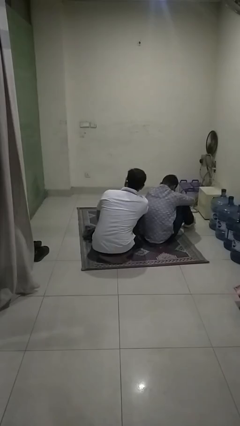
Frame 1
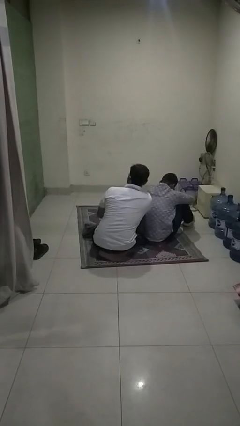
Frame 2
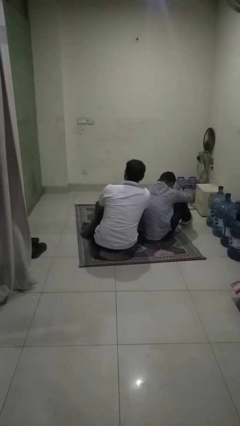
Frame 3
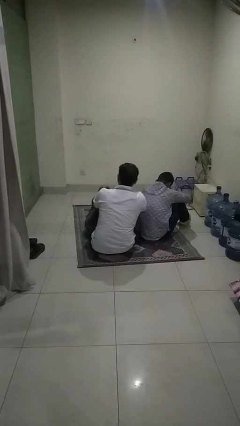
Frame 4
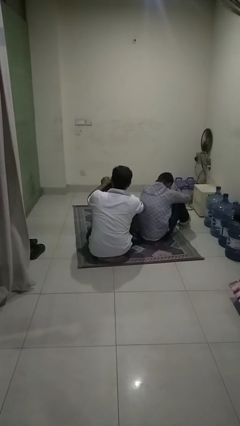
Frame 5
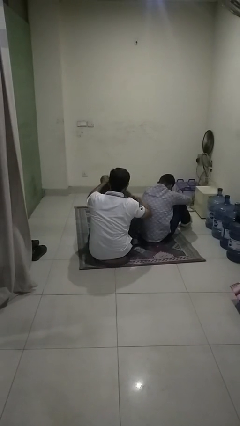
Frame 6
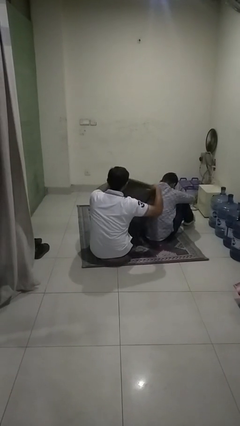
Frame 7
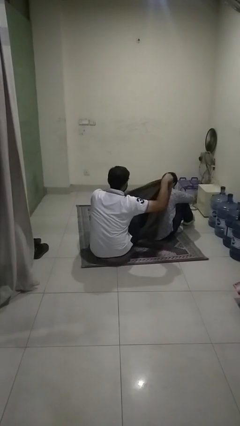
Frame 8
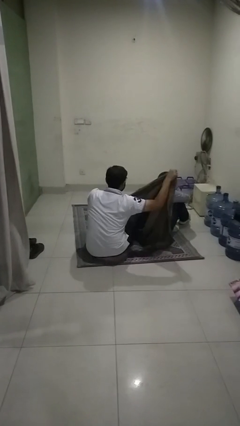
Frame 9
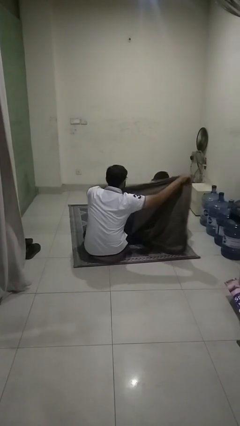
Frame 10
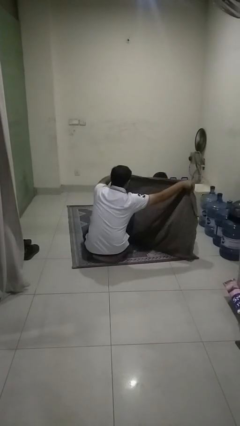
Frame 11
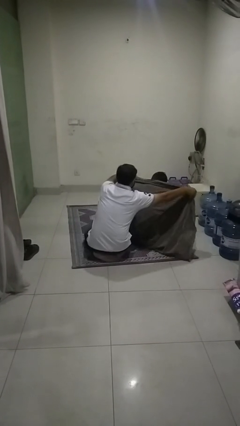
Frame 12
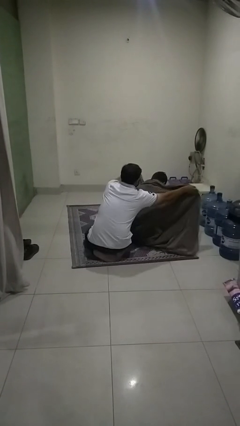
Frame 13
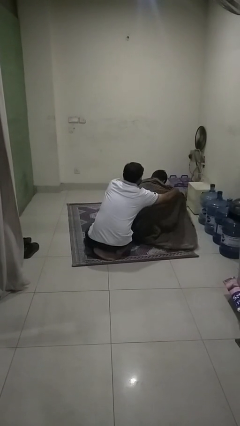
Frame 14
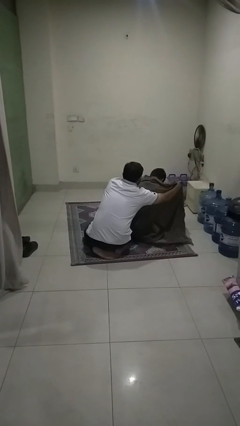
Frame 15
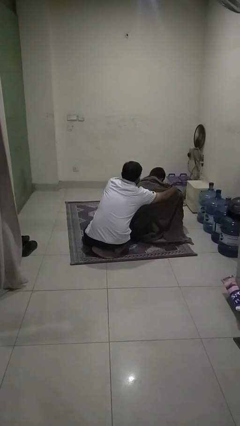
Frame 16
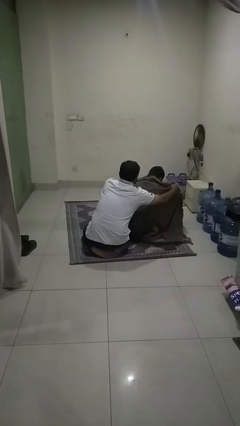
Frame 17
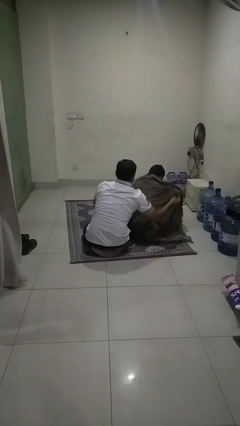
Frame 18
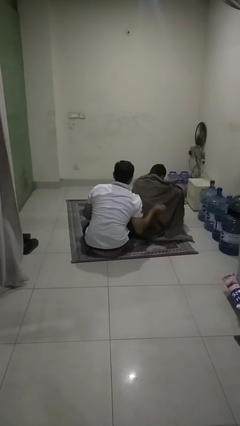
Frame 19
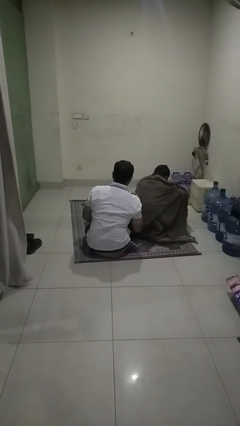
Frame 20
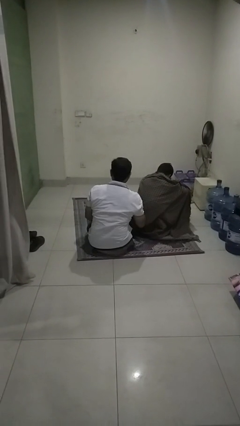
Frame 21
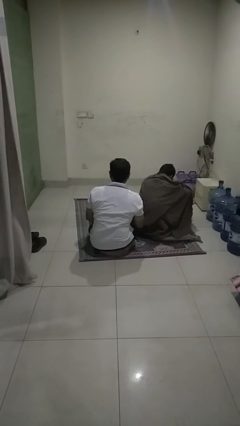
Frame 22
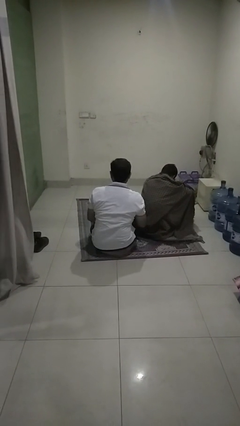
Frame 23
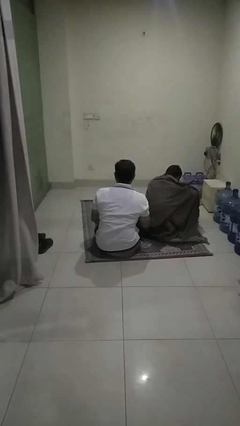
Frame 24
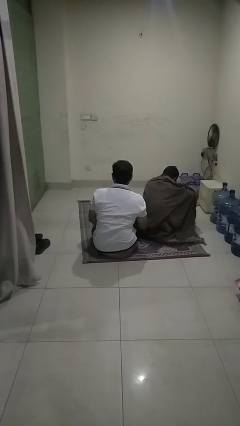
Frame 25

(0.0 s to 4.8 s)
person covers friend with blanket

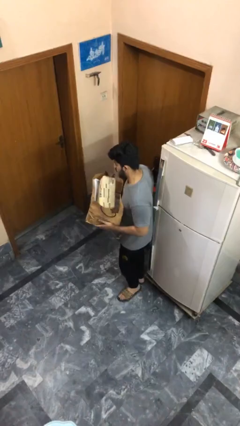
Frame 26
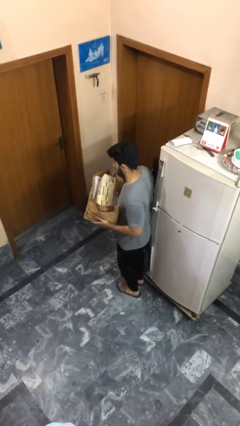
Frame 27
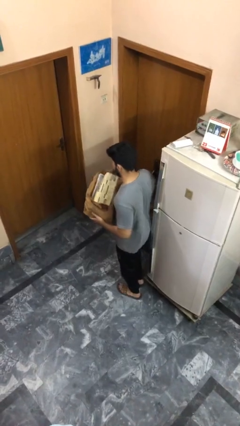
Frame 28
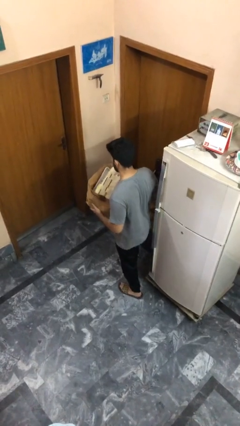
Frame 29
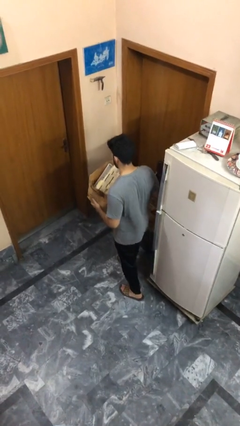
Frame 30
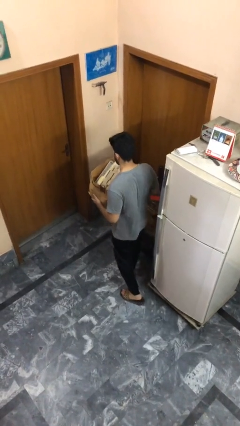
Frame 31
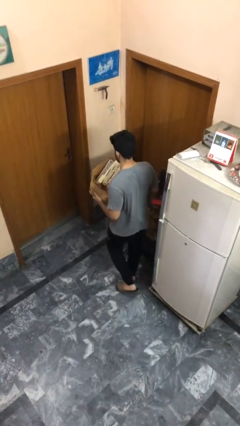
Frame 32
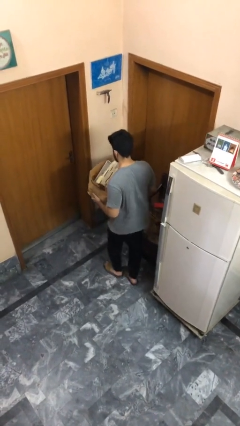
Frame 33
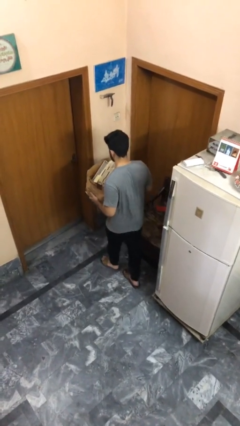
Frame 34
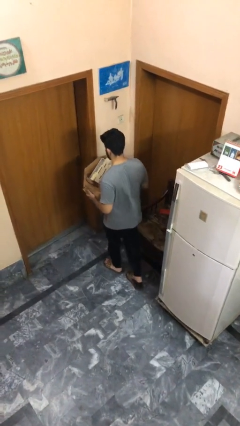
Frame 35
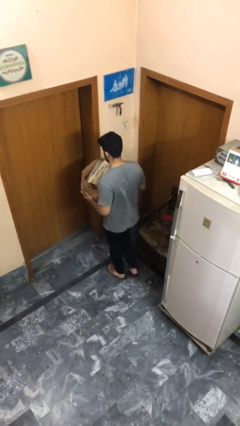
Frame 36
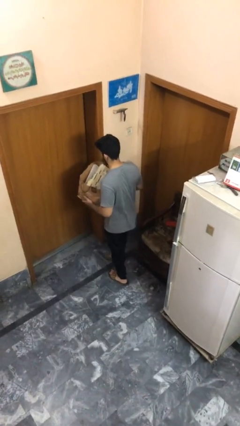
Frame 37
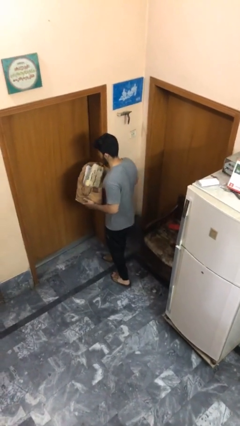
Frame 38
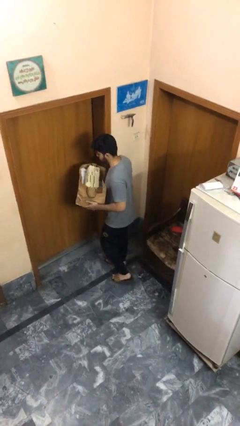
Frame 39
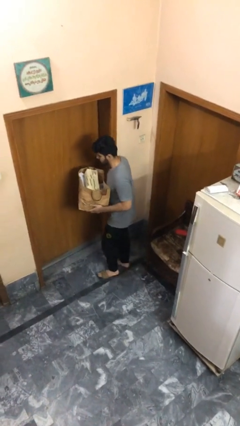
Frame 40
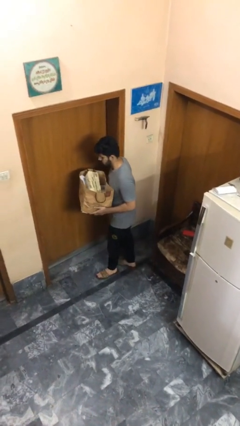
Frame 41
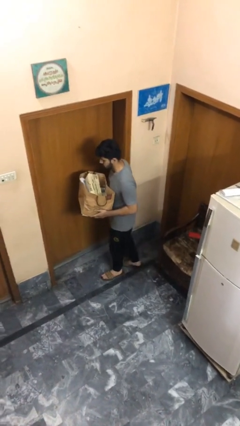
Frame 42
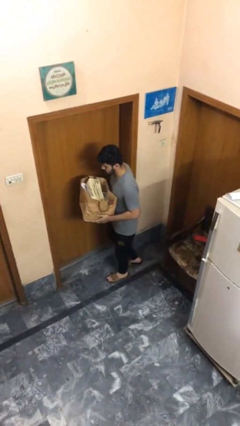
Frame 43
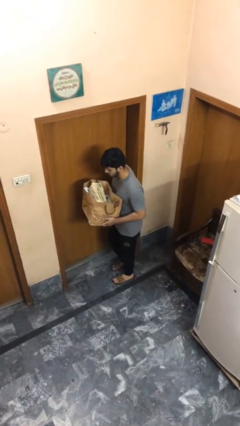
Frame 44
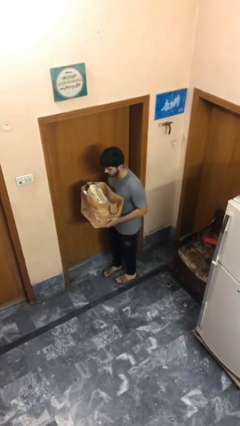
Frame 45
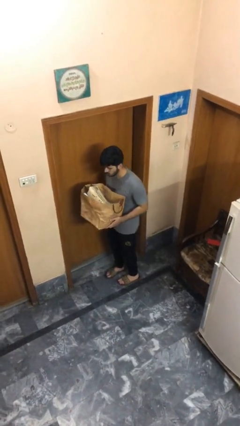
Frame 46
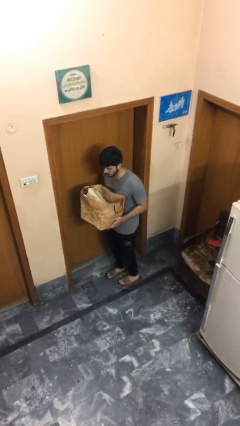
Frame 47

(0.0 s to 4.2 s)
person carries groceries

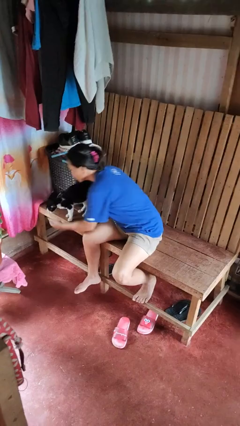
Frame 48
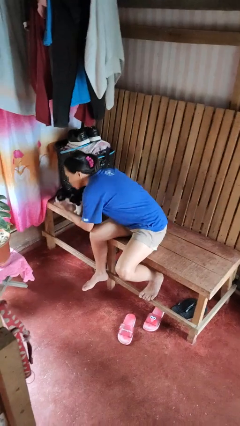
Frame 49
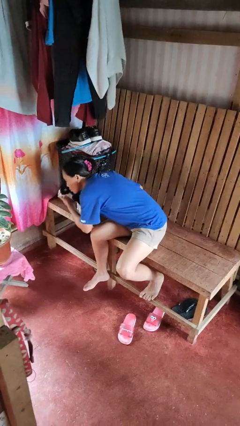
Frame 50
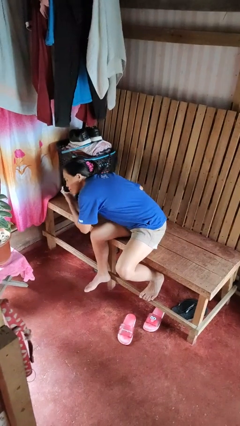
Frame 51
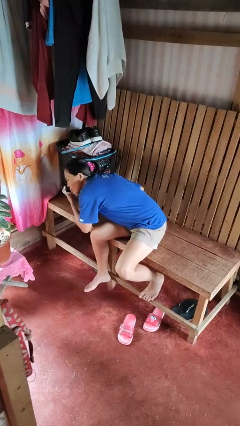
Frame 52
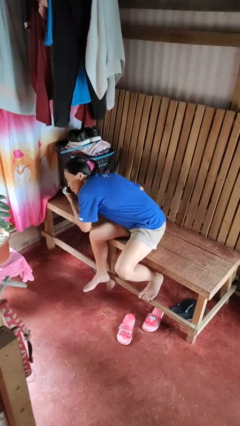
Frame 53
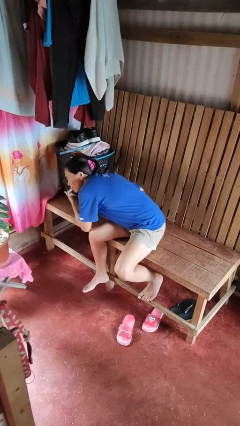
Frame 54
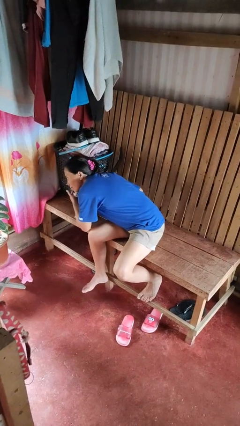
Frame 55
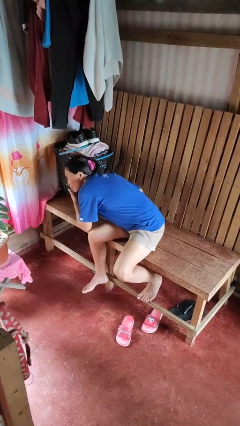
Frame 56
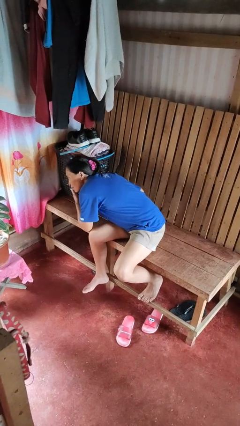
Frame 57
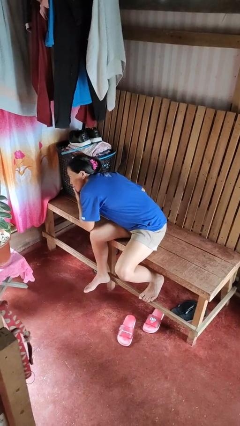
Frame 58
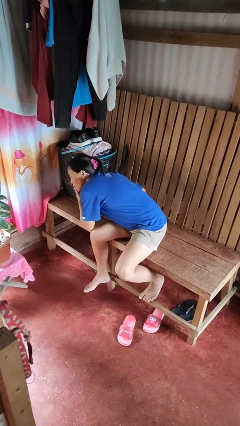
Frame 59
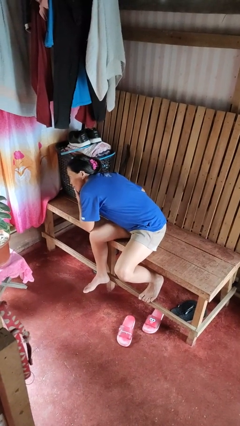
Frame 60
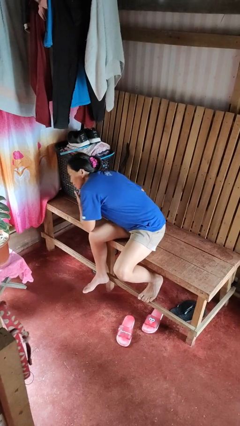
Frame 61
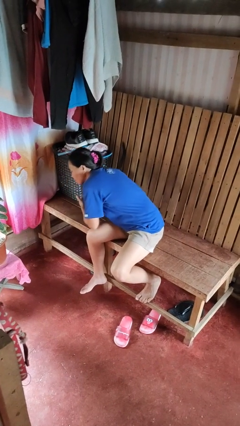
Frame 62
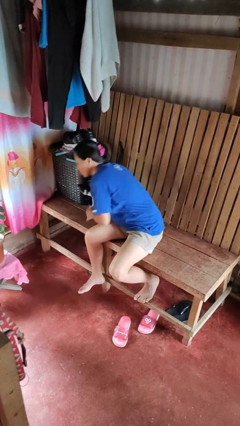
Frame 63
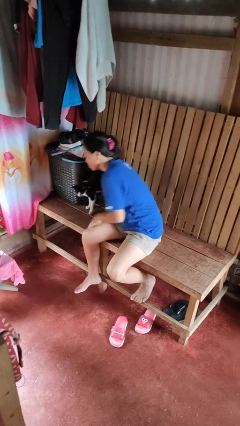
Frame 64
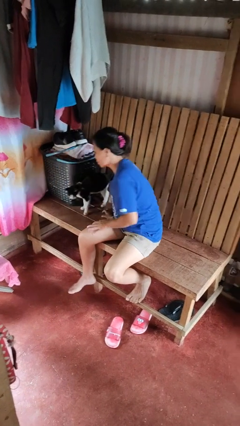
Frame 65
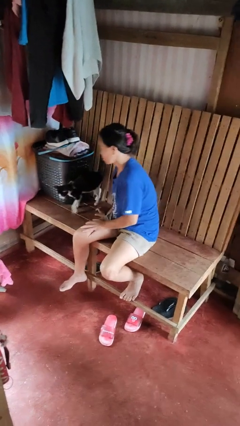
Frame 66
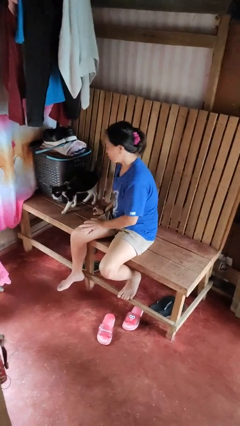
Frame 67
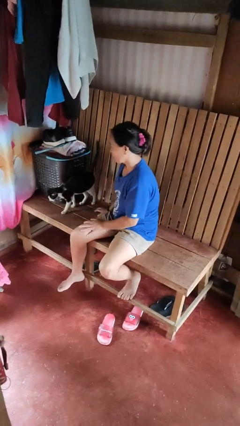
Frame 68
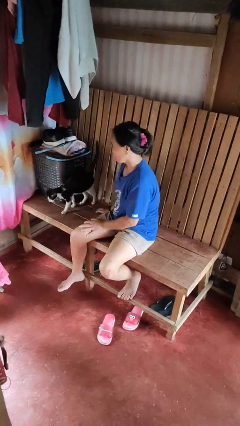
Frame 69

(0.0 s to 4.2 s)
person hugs cat

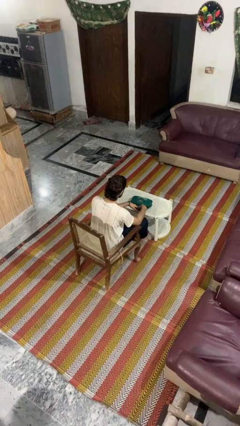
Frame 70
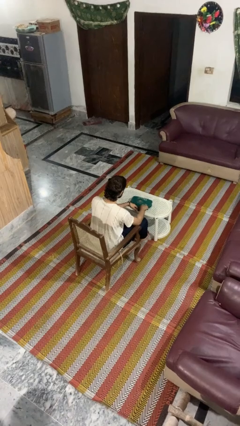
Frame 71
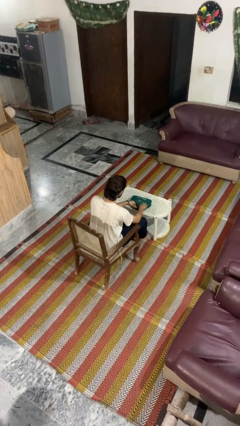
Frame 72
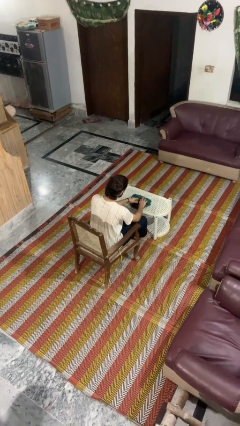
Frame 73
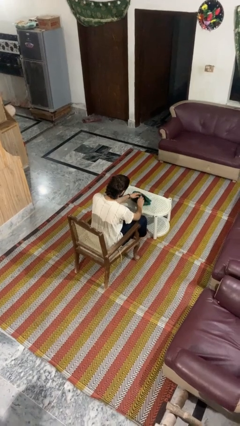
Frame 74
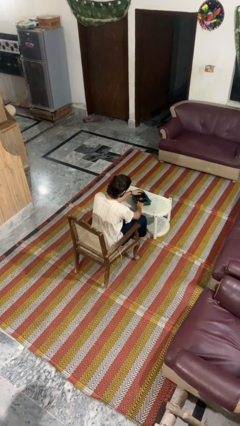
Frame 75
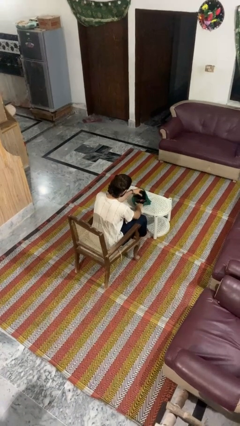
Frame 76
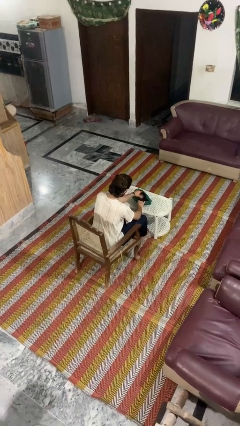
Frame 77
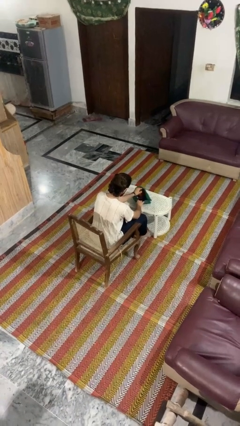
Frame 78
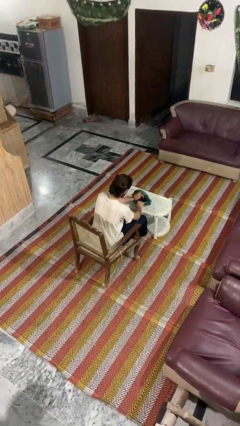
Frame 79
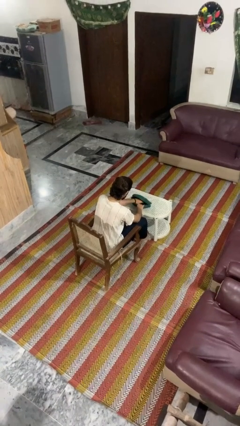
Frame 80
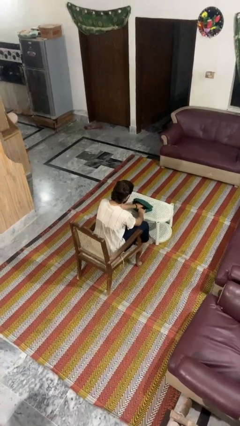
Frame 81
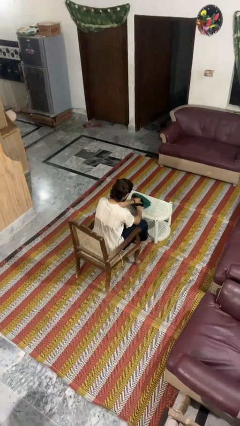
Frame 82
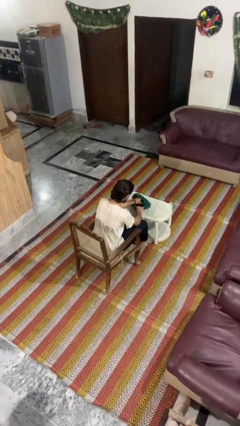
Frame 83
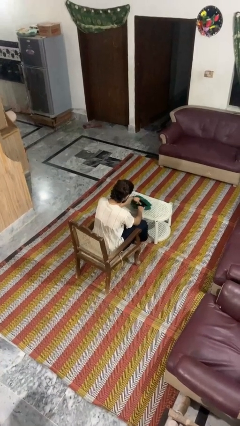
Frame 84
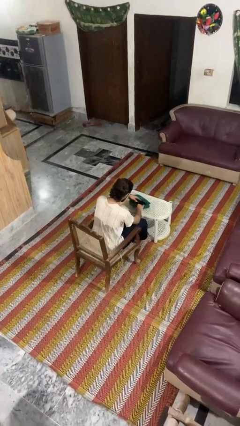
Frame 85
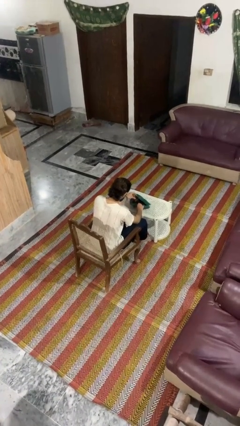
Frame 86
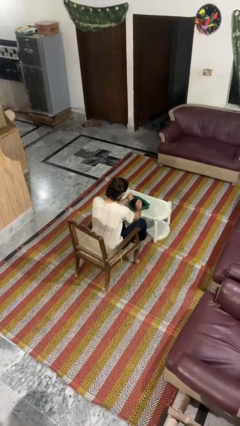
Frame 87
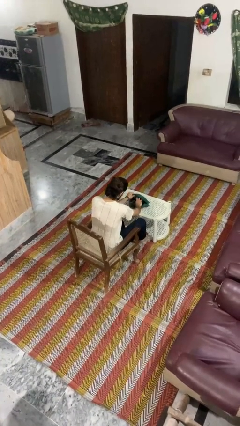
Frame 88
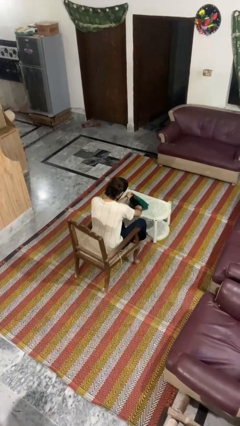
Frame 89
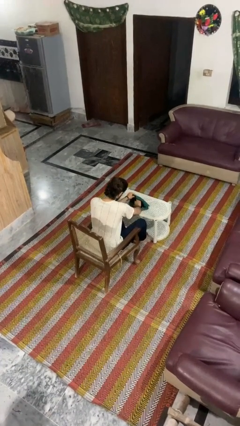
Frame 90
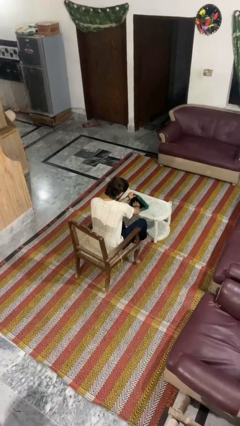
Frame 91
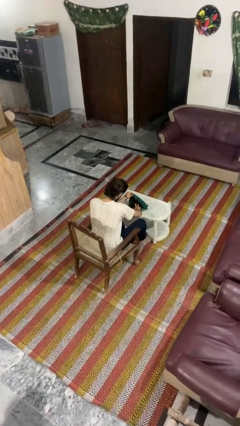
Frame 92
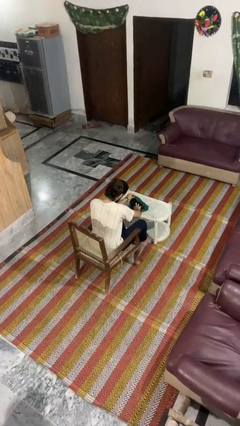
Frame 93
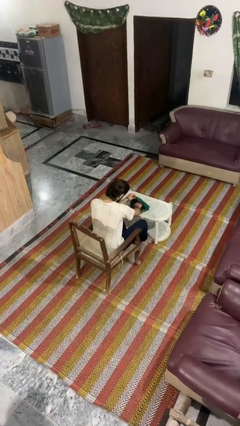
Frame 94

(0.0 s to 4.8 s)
person searches in purse

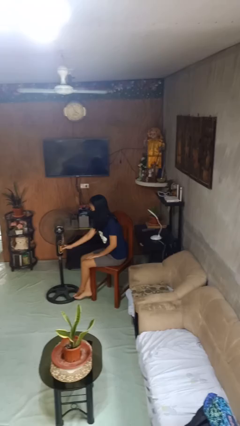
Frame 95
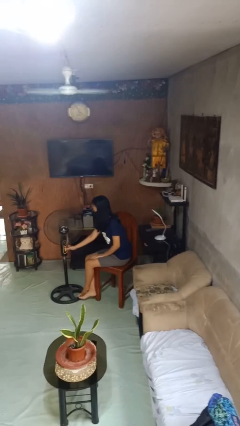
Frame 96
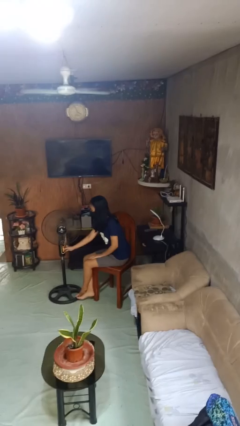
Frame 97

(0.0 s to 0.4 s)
person turns on fan
